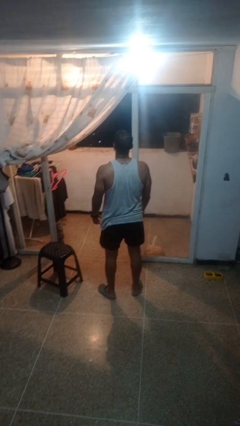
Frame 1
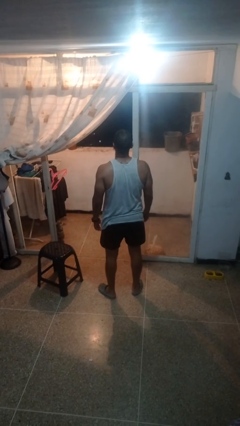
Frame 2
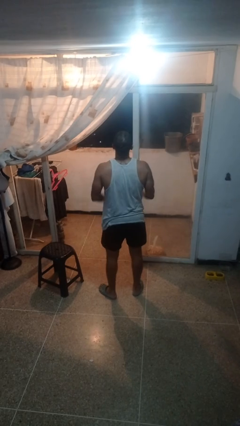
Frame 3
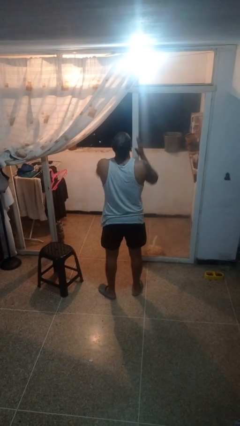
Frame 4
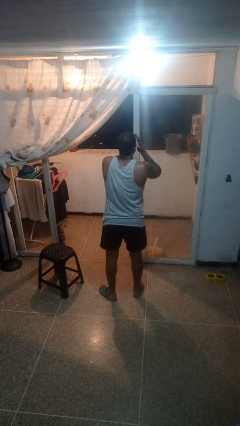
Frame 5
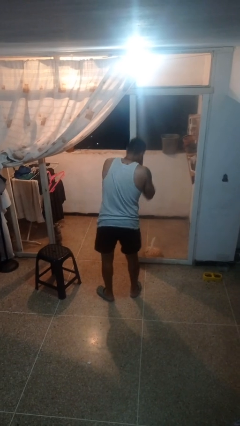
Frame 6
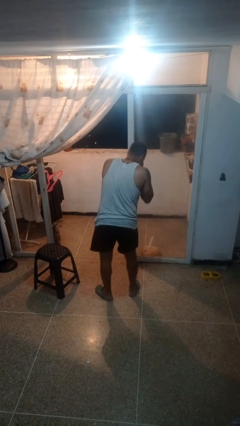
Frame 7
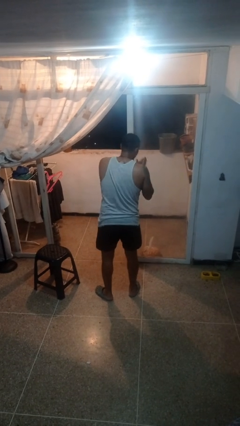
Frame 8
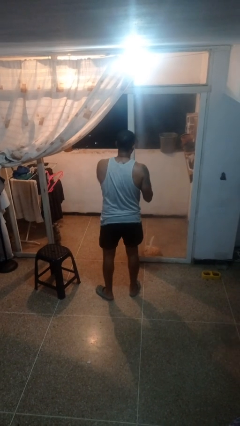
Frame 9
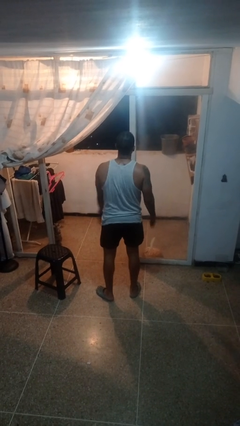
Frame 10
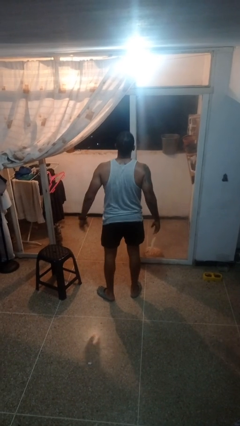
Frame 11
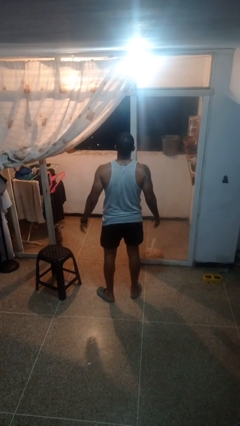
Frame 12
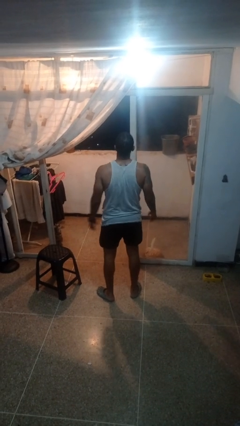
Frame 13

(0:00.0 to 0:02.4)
person sneezes into hand

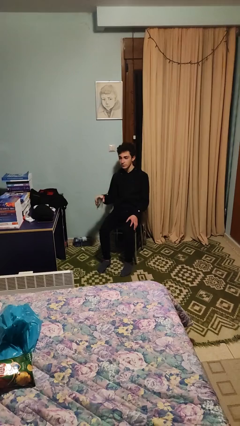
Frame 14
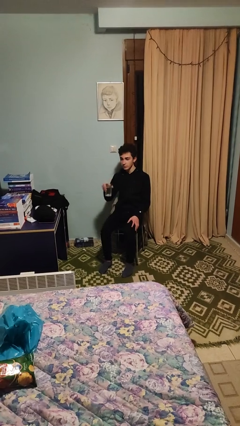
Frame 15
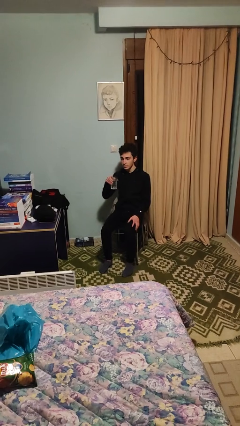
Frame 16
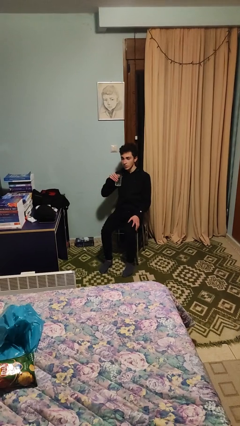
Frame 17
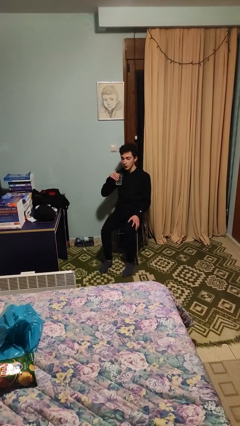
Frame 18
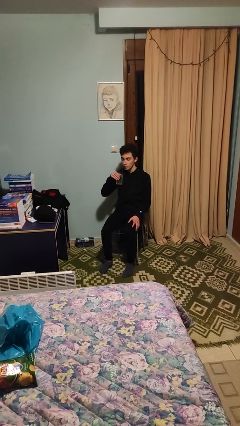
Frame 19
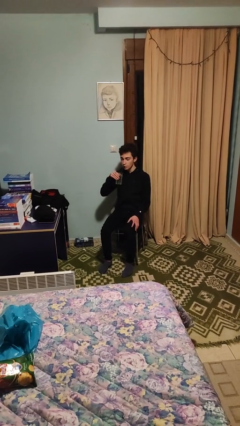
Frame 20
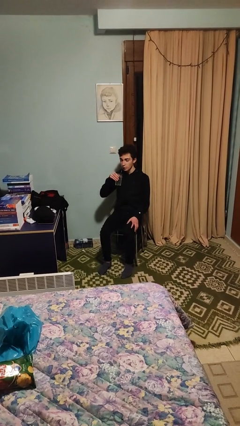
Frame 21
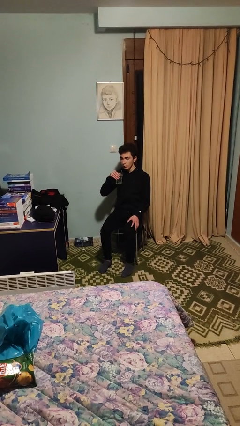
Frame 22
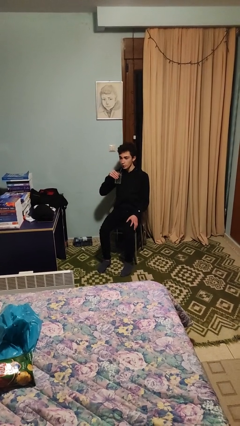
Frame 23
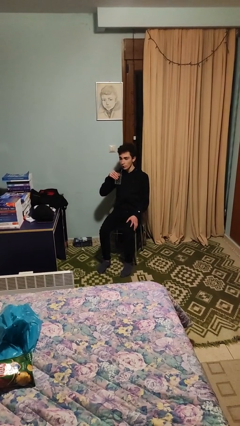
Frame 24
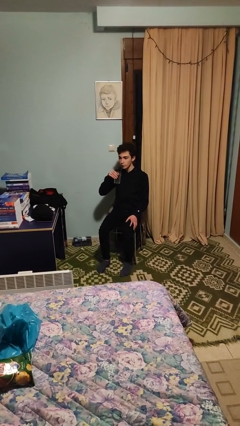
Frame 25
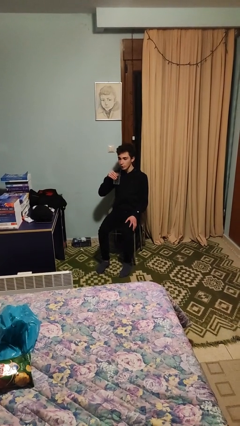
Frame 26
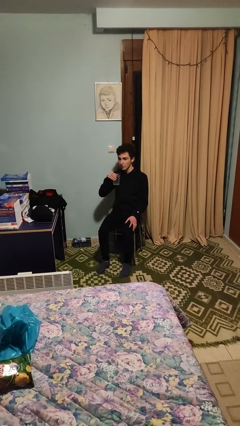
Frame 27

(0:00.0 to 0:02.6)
person drinks from straw

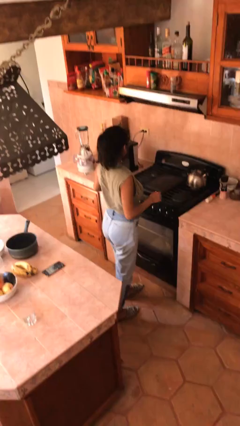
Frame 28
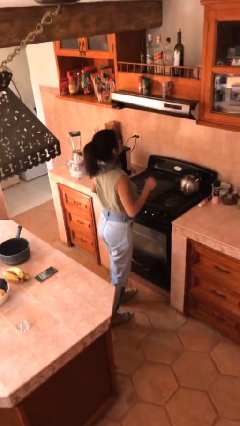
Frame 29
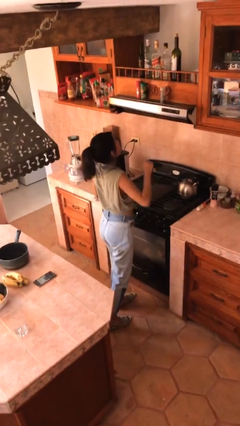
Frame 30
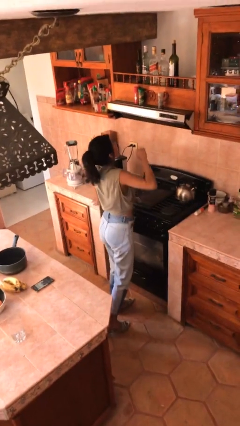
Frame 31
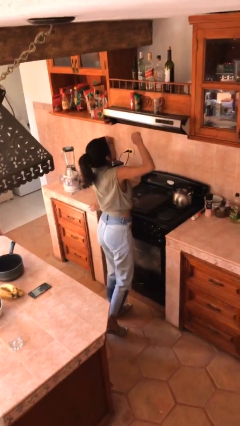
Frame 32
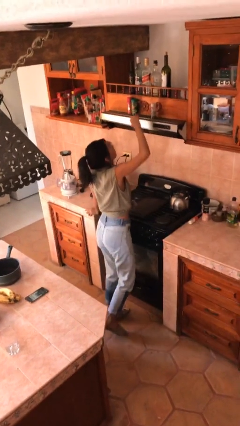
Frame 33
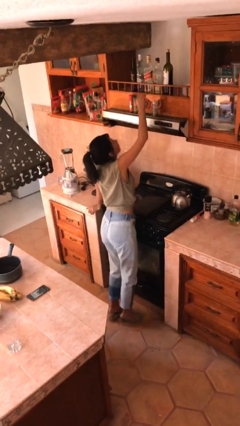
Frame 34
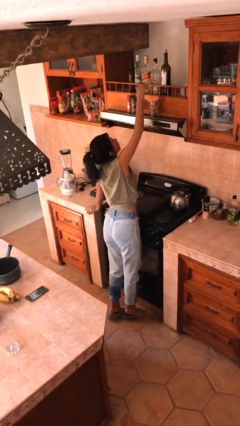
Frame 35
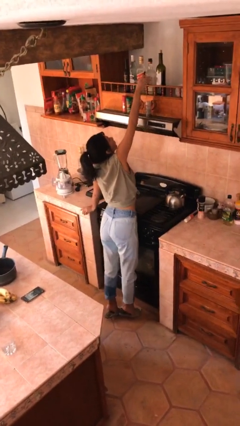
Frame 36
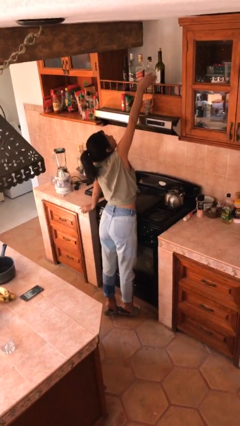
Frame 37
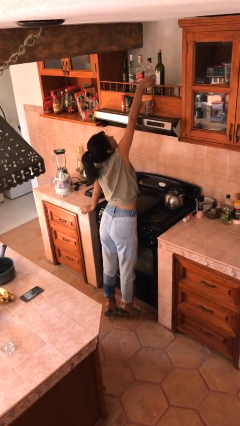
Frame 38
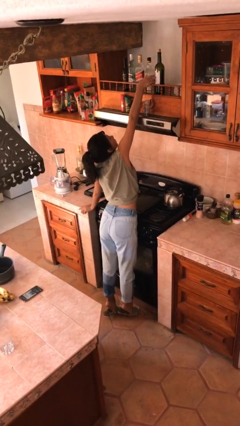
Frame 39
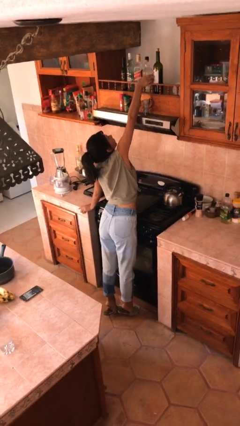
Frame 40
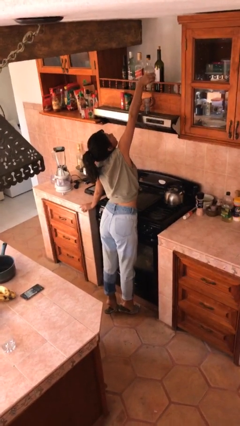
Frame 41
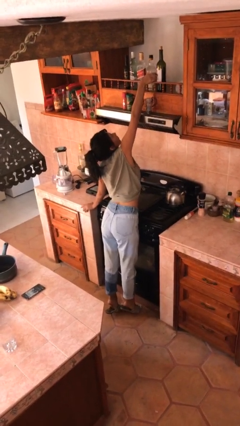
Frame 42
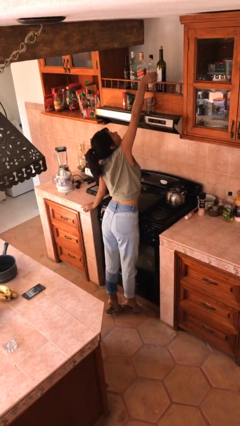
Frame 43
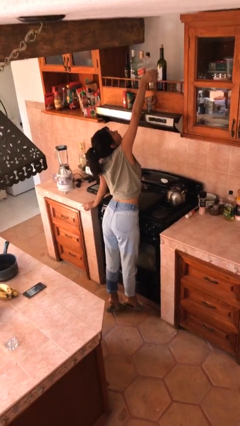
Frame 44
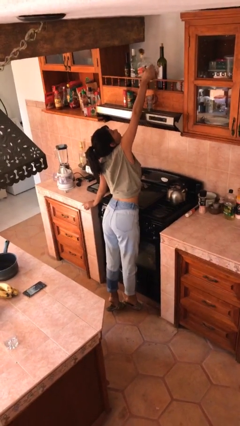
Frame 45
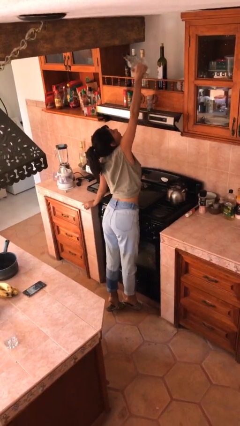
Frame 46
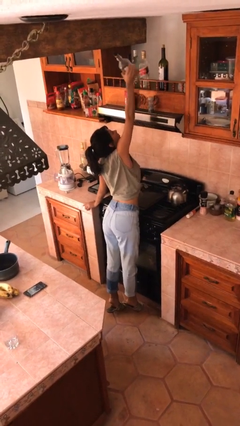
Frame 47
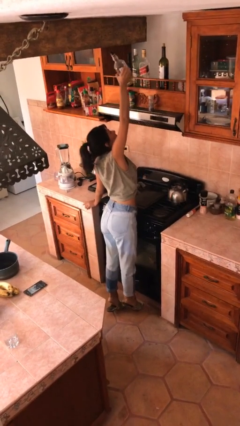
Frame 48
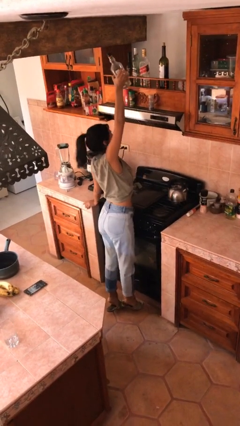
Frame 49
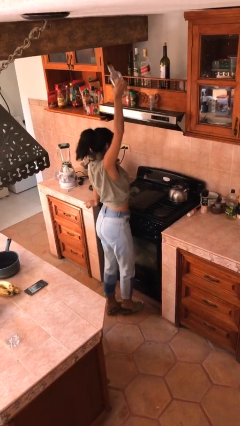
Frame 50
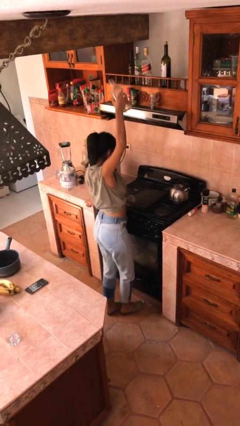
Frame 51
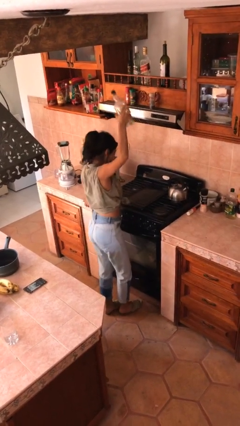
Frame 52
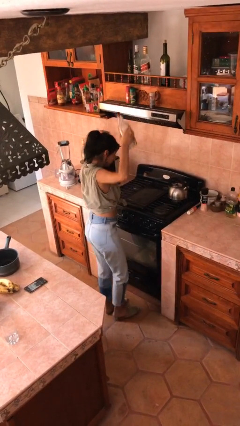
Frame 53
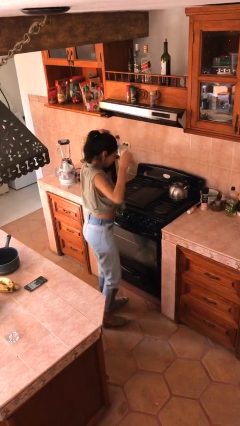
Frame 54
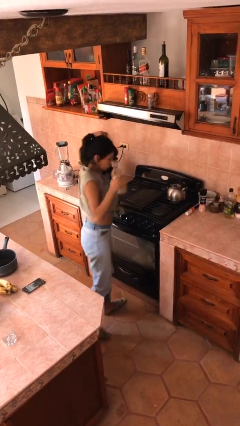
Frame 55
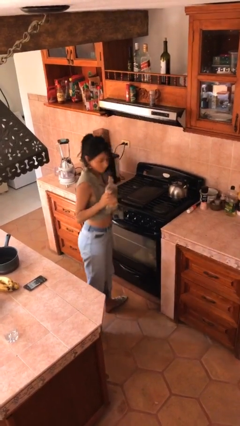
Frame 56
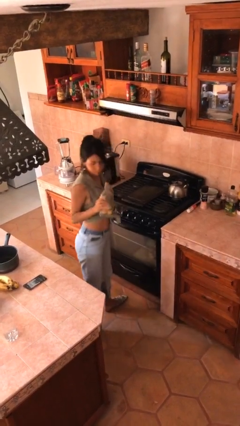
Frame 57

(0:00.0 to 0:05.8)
person picks up object from shelf

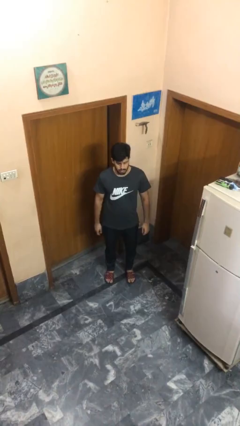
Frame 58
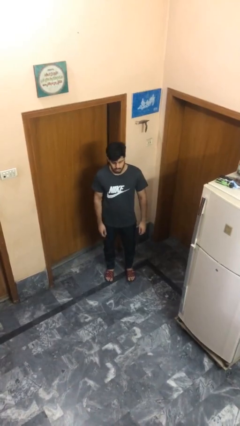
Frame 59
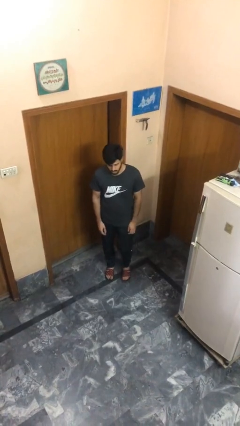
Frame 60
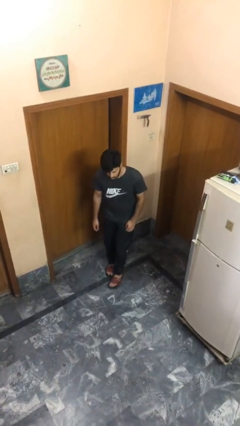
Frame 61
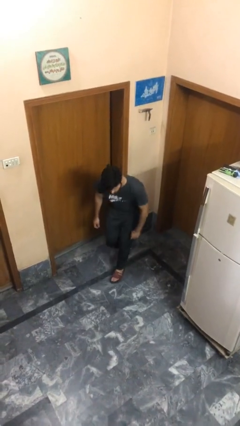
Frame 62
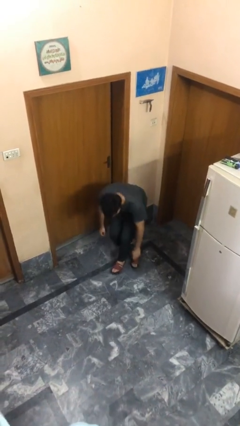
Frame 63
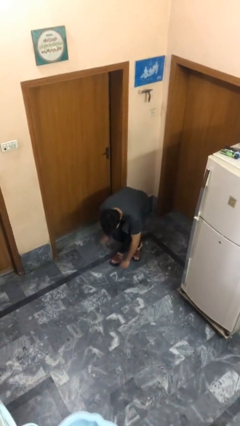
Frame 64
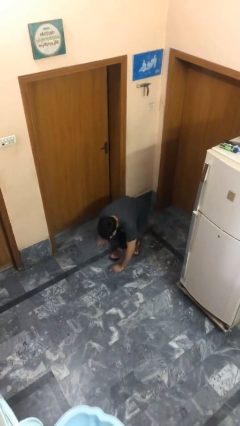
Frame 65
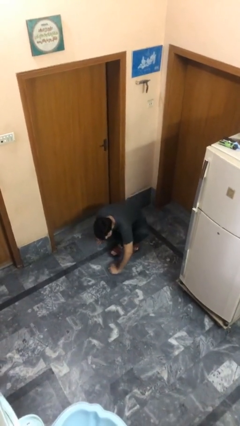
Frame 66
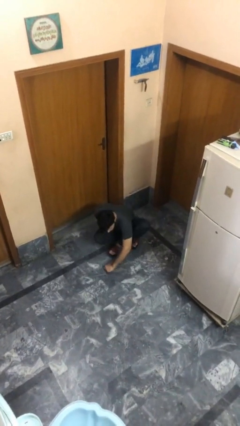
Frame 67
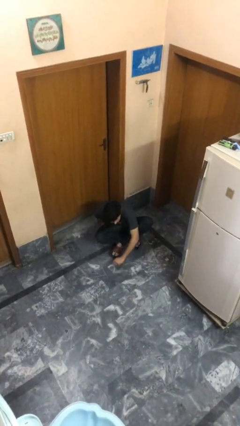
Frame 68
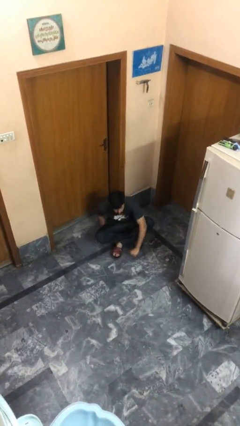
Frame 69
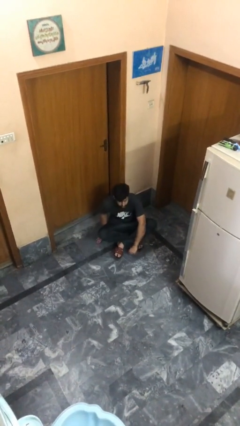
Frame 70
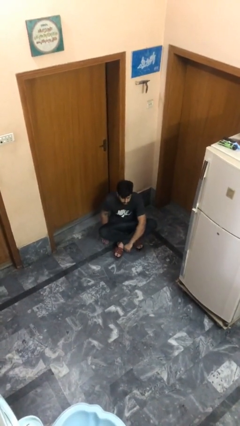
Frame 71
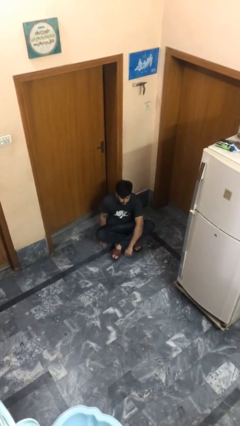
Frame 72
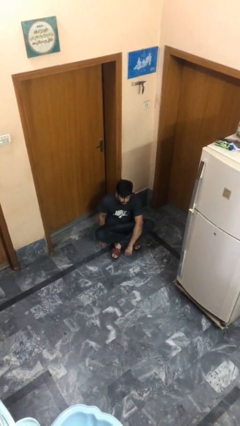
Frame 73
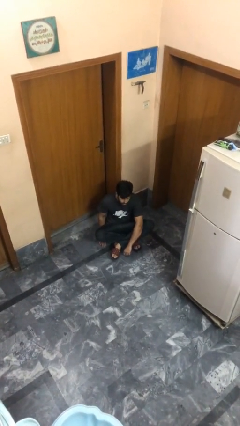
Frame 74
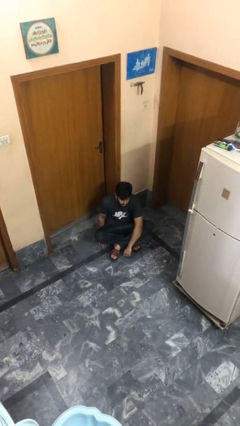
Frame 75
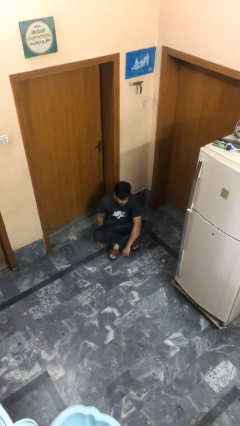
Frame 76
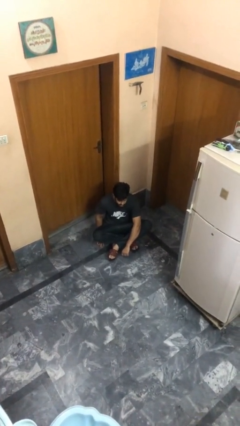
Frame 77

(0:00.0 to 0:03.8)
person sits crisscross

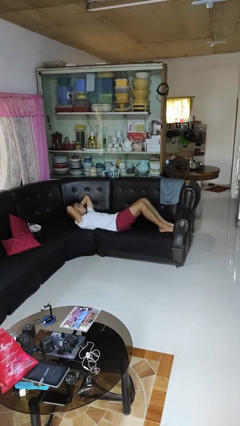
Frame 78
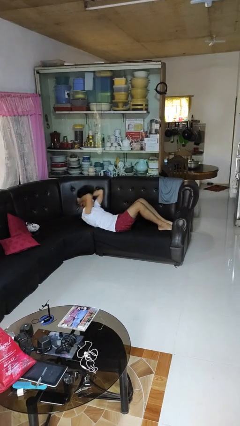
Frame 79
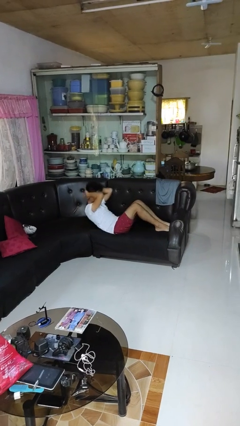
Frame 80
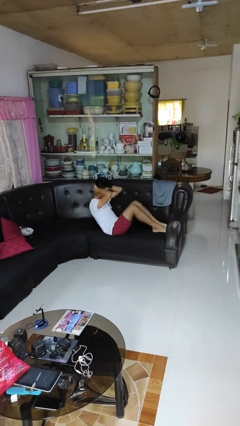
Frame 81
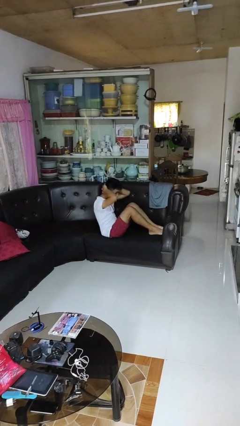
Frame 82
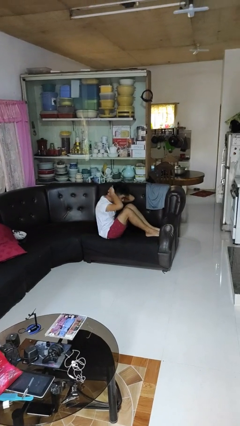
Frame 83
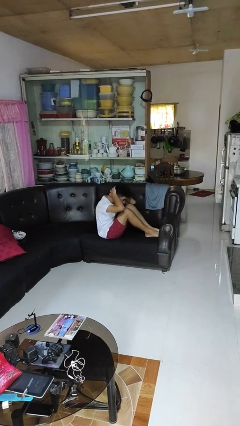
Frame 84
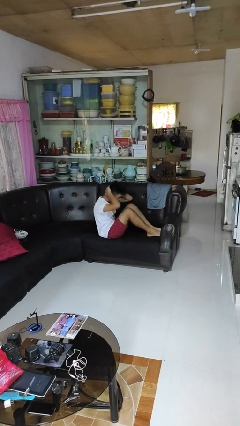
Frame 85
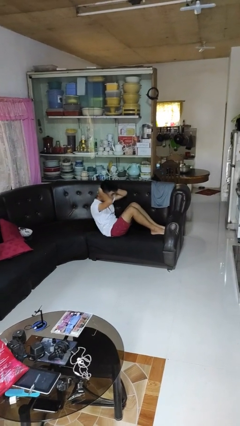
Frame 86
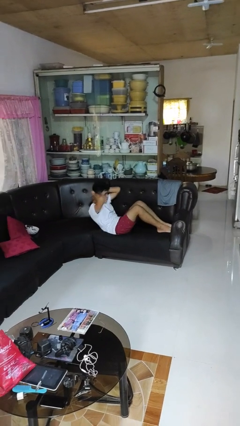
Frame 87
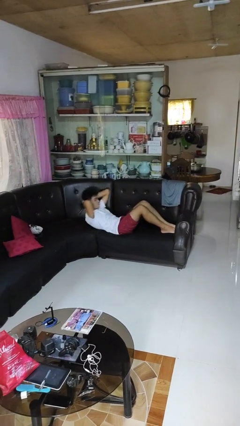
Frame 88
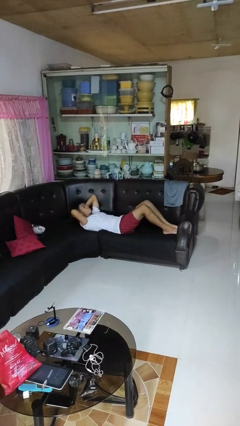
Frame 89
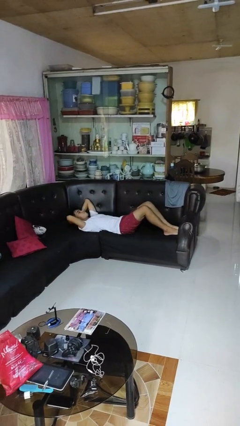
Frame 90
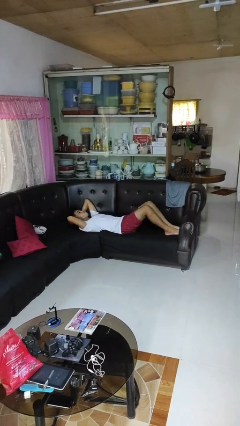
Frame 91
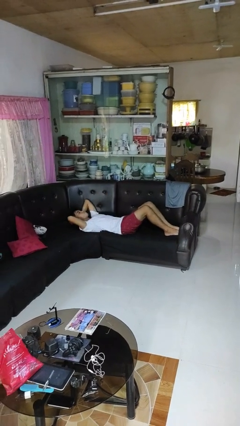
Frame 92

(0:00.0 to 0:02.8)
person exercises with situp

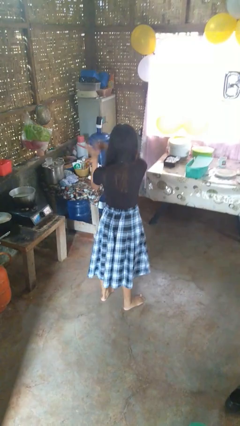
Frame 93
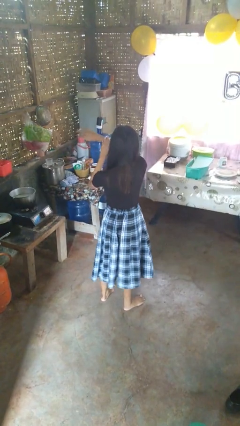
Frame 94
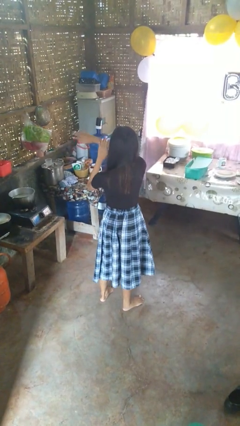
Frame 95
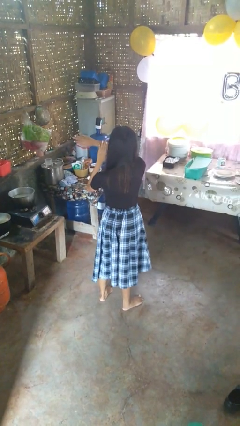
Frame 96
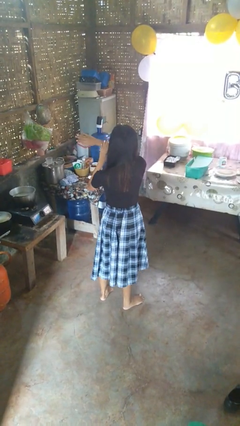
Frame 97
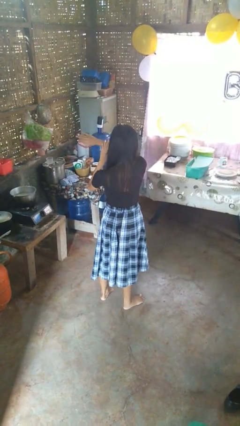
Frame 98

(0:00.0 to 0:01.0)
person swats bug
